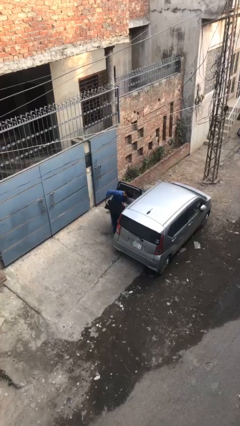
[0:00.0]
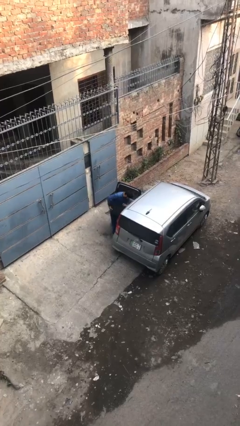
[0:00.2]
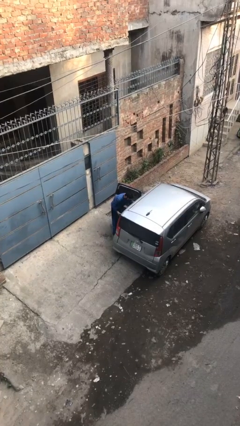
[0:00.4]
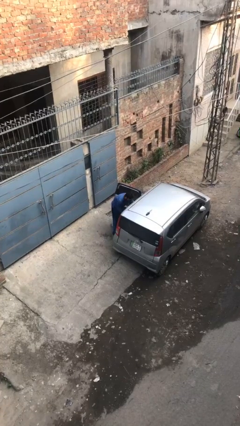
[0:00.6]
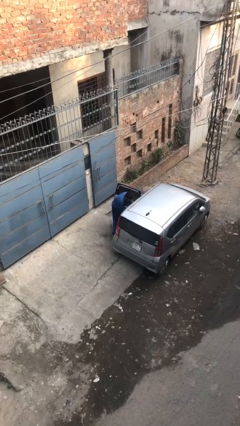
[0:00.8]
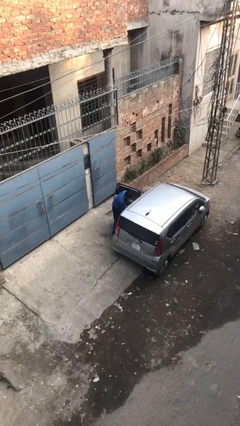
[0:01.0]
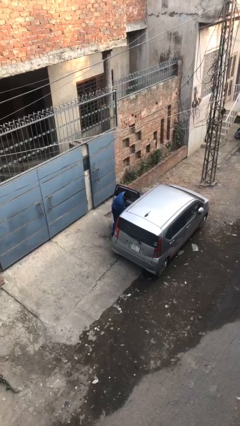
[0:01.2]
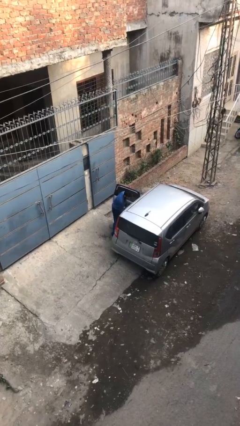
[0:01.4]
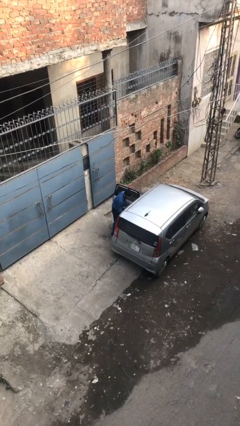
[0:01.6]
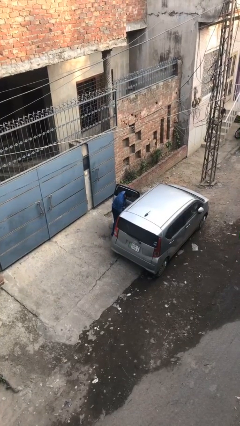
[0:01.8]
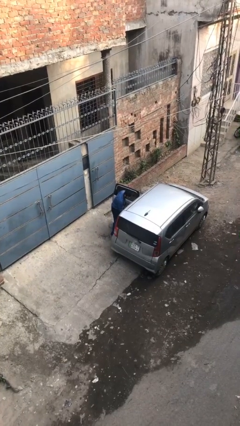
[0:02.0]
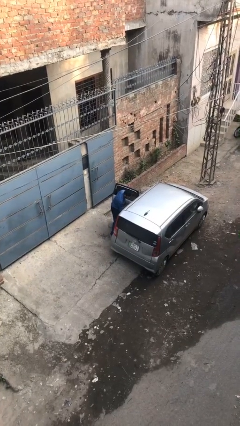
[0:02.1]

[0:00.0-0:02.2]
person loads car

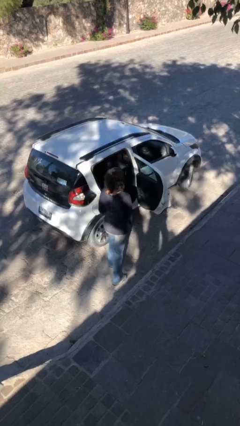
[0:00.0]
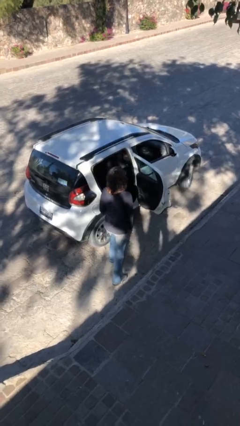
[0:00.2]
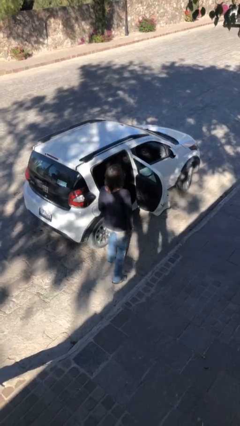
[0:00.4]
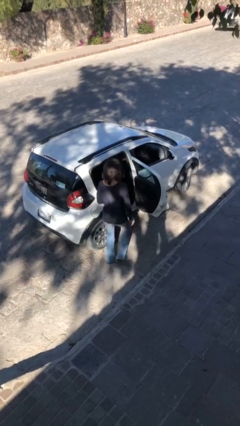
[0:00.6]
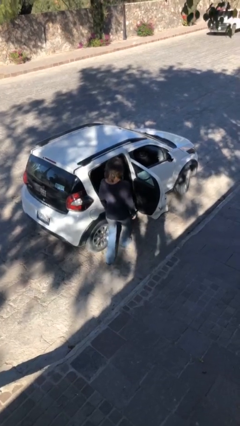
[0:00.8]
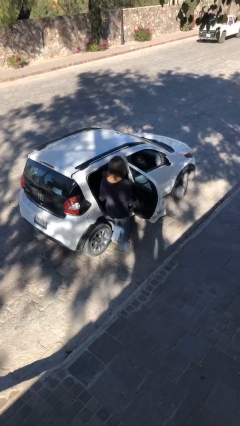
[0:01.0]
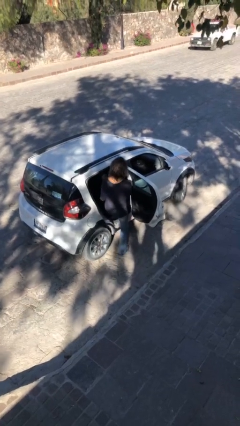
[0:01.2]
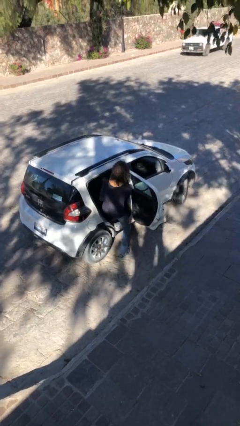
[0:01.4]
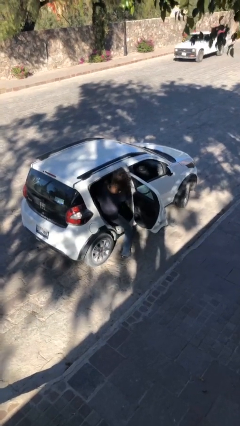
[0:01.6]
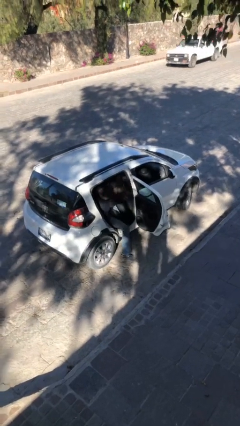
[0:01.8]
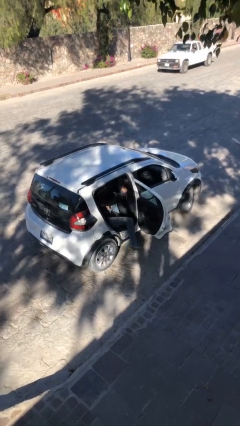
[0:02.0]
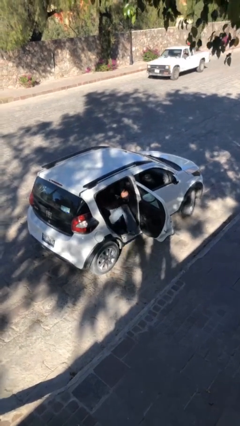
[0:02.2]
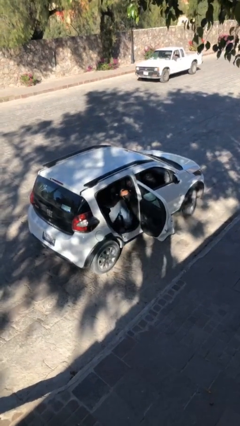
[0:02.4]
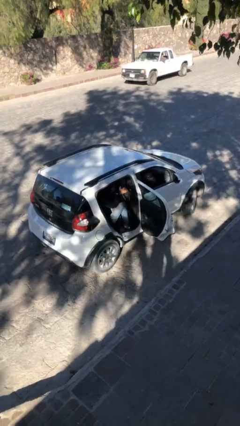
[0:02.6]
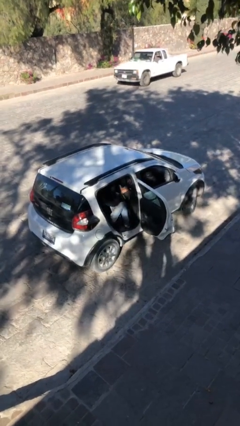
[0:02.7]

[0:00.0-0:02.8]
person enters car

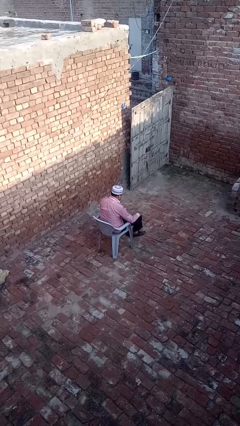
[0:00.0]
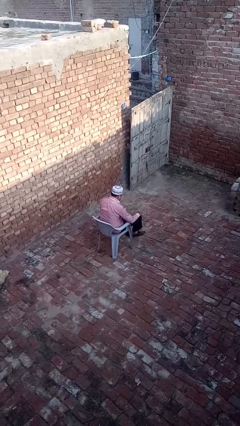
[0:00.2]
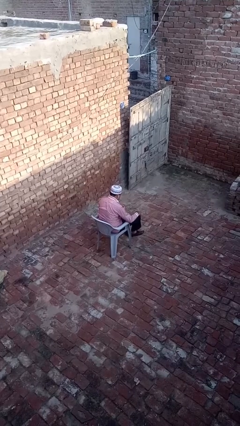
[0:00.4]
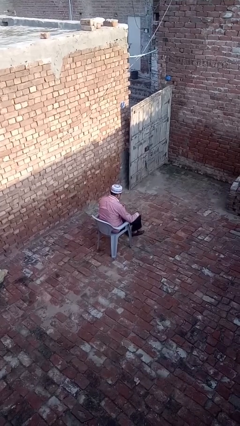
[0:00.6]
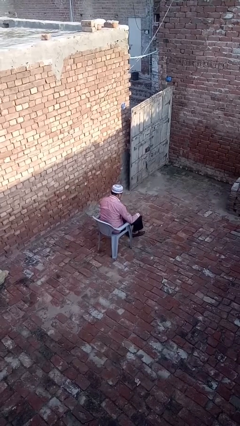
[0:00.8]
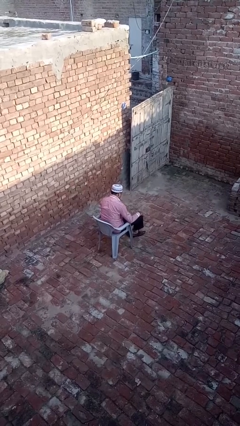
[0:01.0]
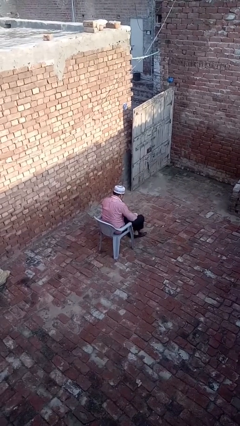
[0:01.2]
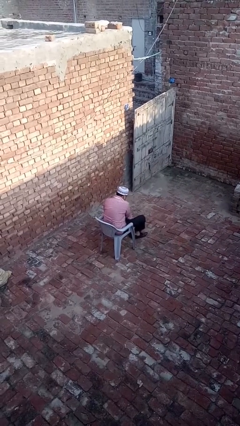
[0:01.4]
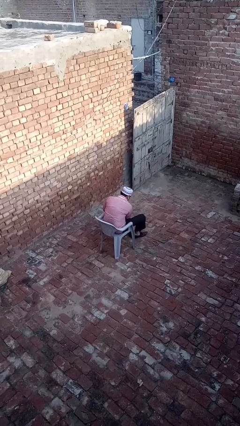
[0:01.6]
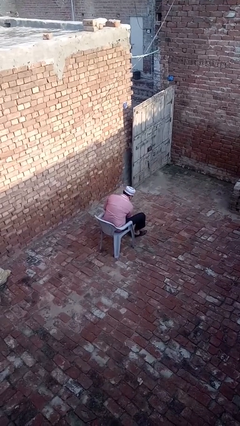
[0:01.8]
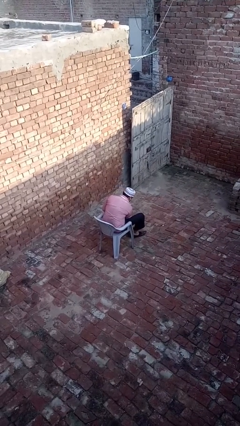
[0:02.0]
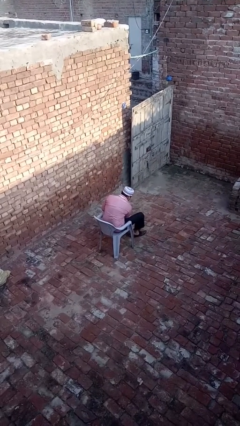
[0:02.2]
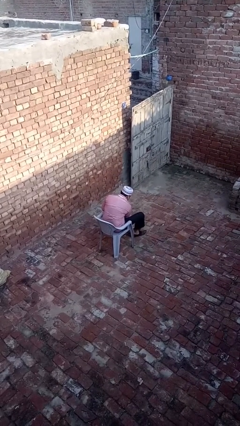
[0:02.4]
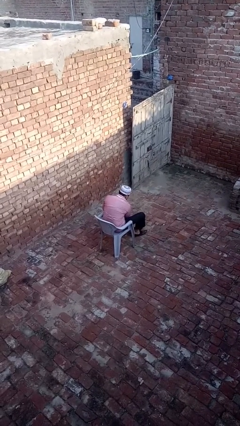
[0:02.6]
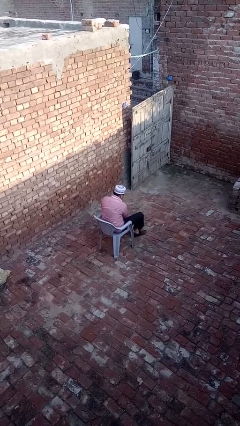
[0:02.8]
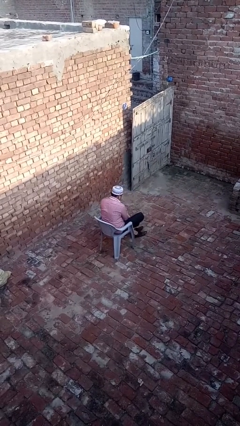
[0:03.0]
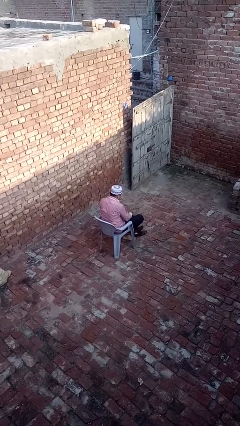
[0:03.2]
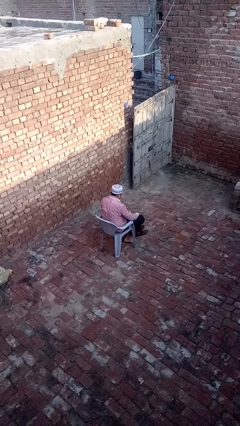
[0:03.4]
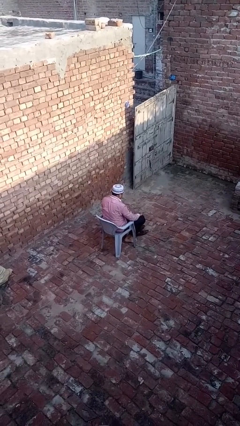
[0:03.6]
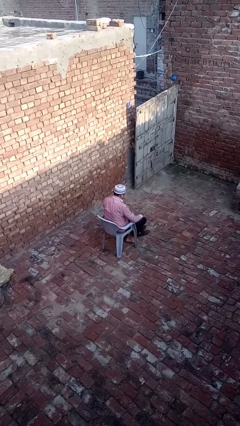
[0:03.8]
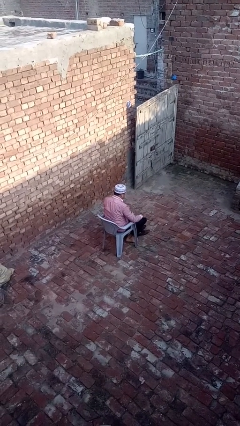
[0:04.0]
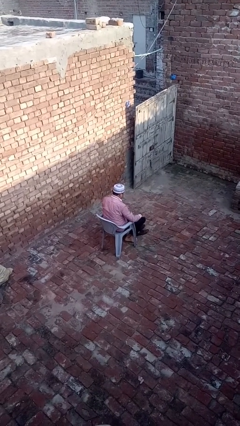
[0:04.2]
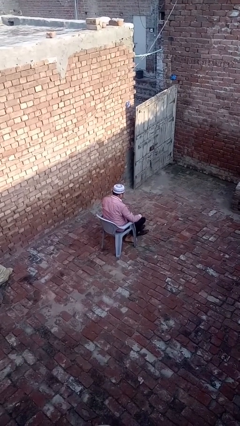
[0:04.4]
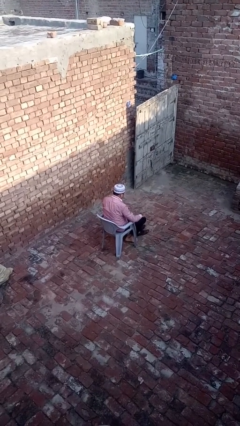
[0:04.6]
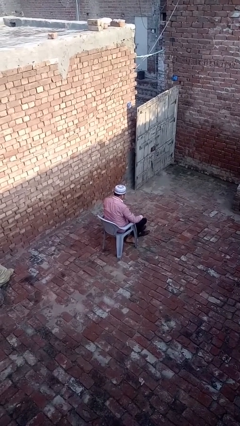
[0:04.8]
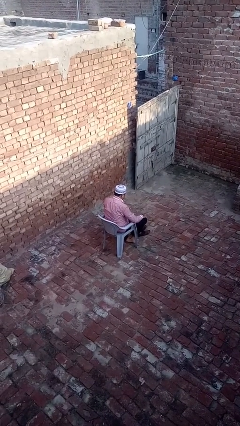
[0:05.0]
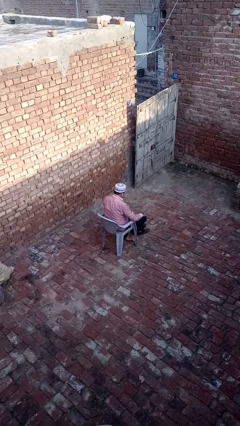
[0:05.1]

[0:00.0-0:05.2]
person takes off shoes

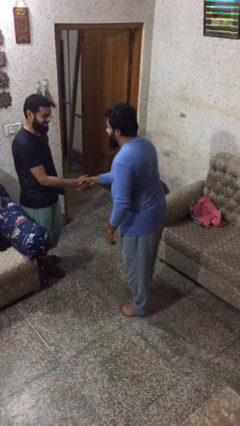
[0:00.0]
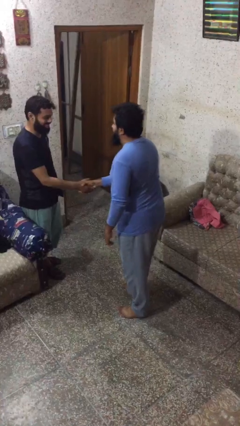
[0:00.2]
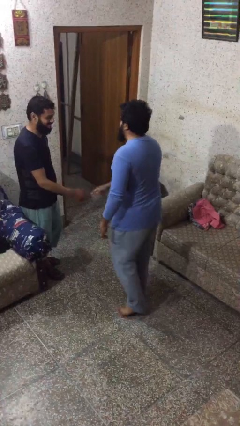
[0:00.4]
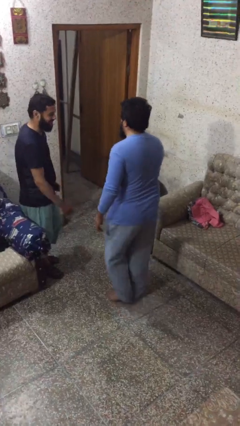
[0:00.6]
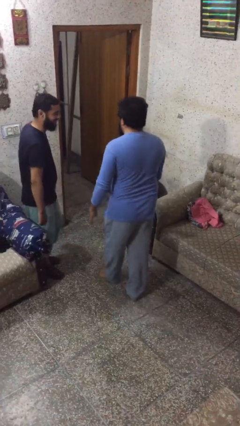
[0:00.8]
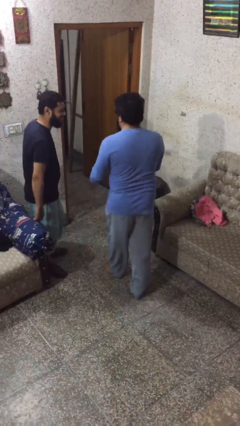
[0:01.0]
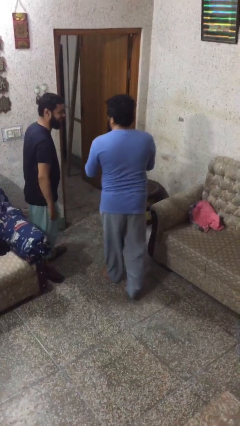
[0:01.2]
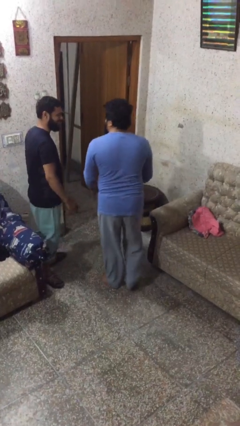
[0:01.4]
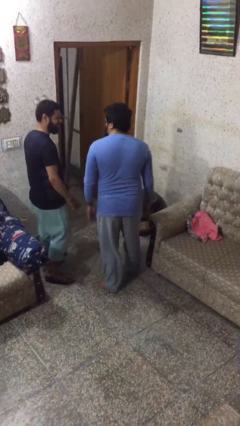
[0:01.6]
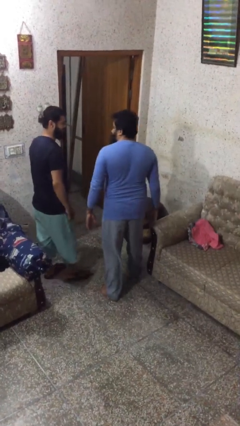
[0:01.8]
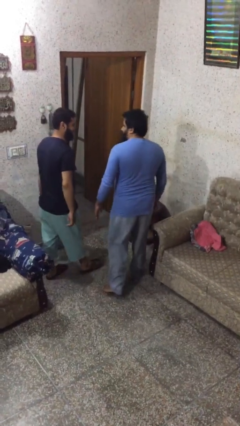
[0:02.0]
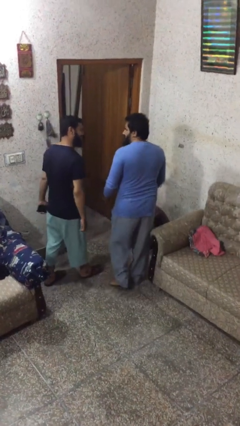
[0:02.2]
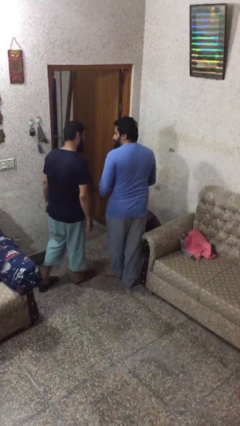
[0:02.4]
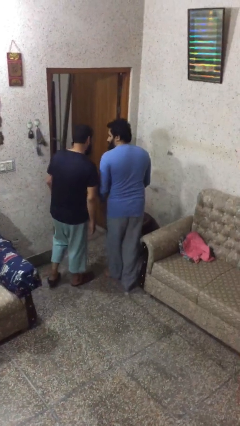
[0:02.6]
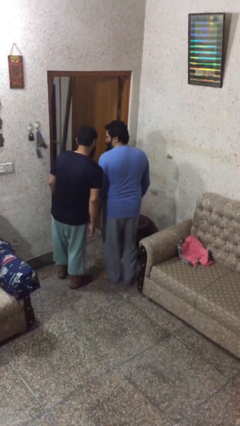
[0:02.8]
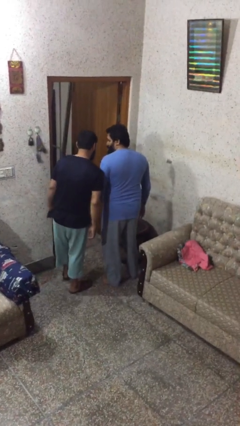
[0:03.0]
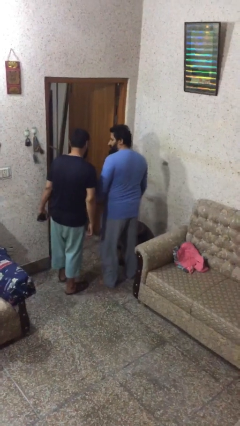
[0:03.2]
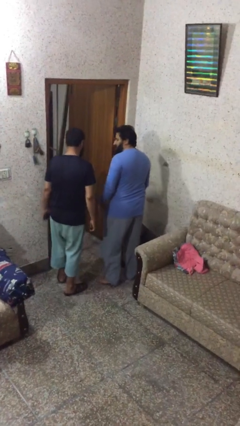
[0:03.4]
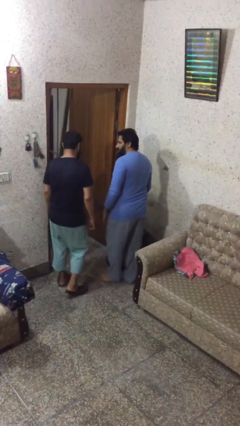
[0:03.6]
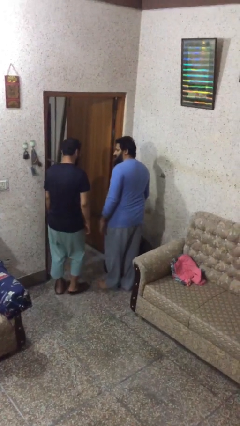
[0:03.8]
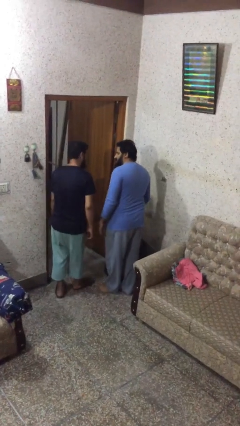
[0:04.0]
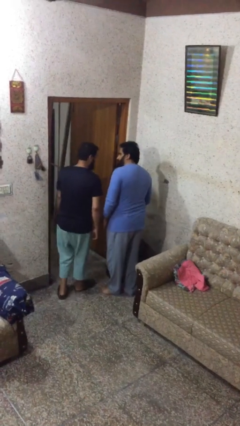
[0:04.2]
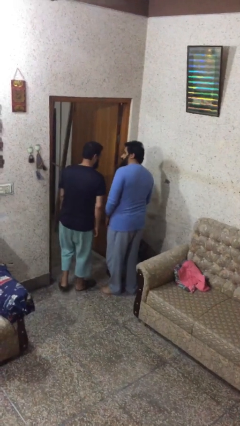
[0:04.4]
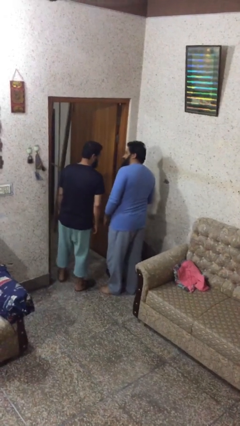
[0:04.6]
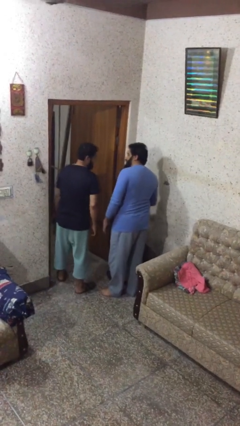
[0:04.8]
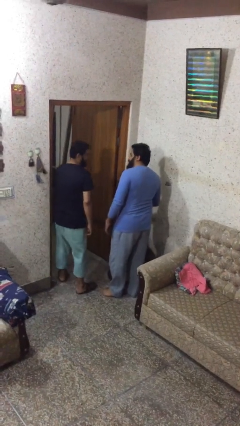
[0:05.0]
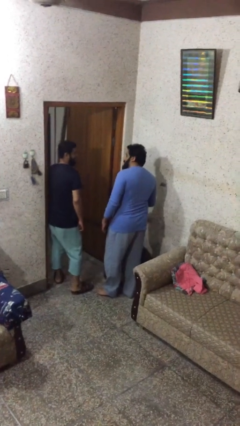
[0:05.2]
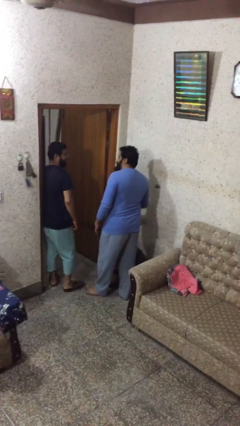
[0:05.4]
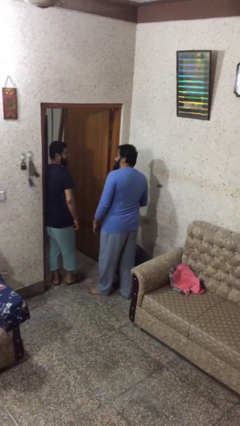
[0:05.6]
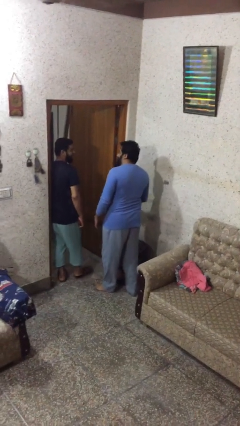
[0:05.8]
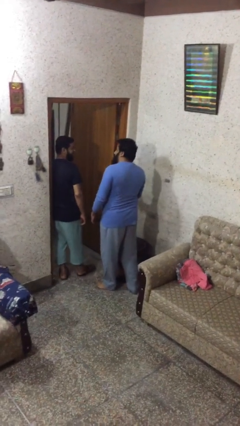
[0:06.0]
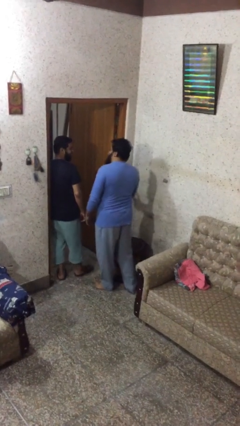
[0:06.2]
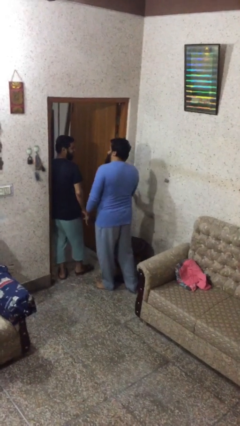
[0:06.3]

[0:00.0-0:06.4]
person talks to person

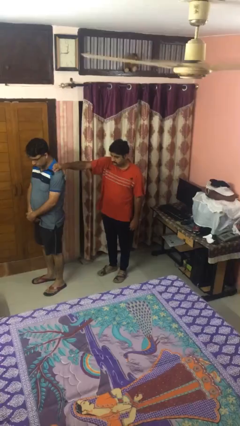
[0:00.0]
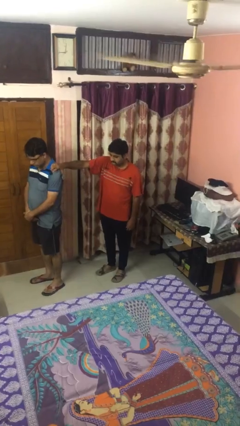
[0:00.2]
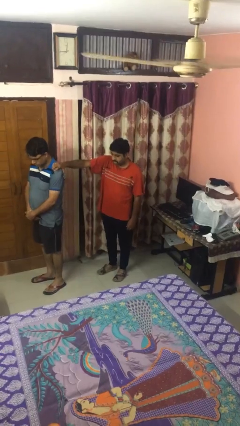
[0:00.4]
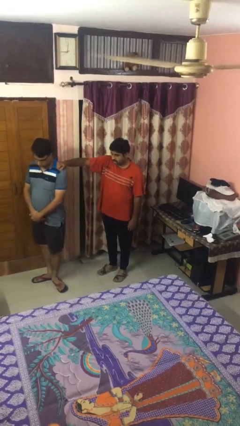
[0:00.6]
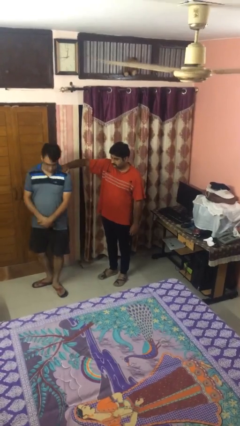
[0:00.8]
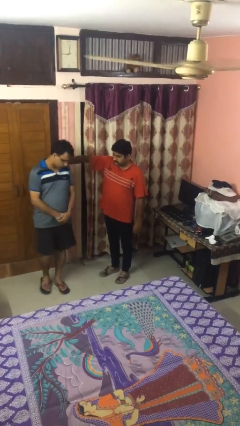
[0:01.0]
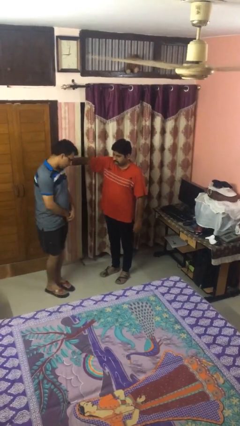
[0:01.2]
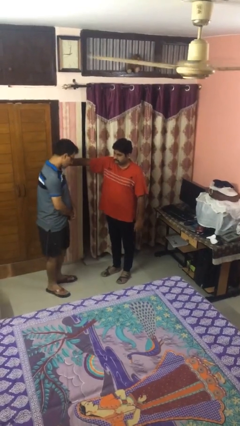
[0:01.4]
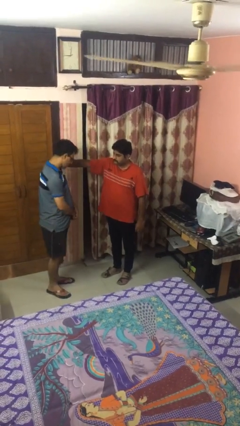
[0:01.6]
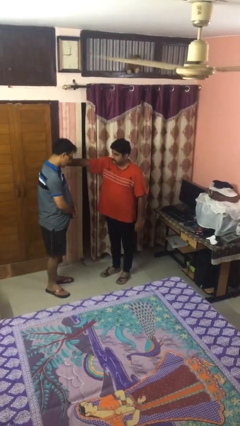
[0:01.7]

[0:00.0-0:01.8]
person spins person around
